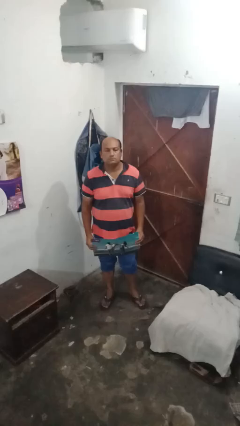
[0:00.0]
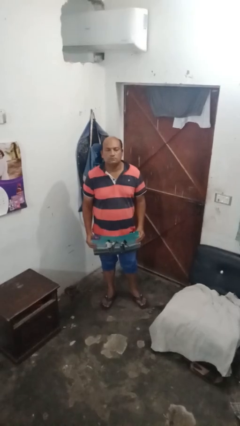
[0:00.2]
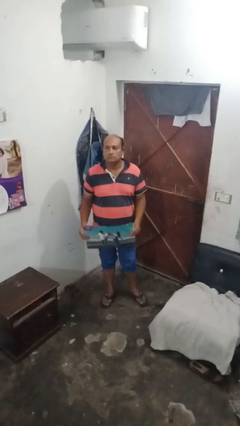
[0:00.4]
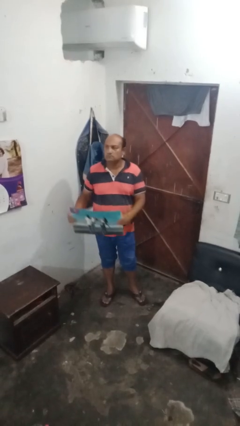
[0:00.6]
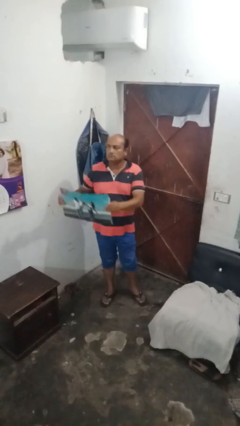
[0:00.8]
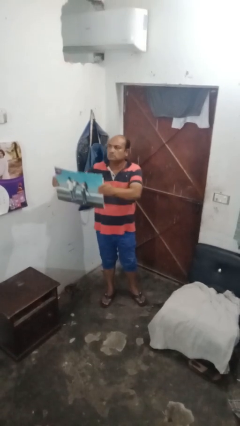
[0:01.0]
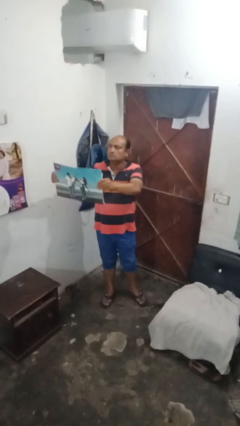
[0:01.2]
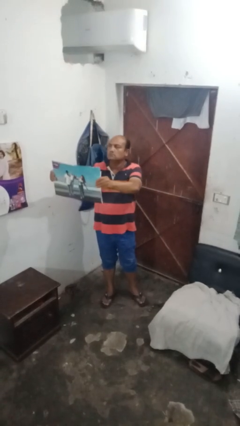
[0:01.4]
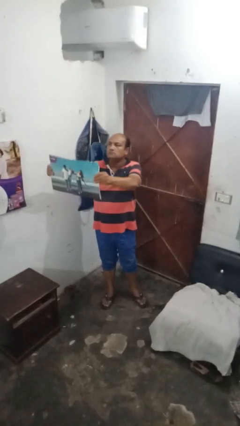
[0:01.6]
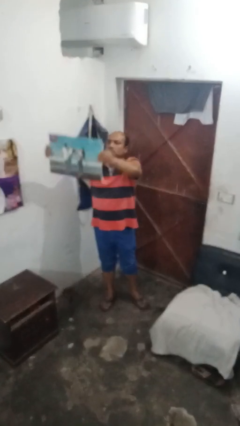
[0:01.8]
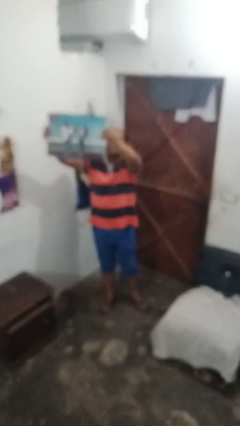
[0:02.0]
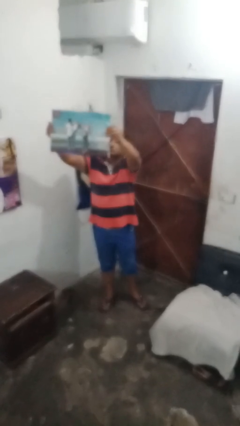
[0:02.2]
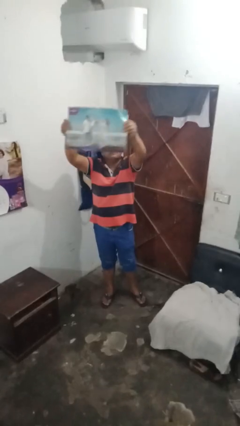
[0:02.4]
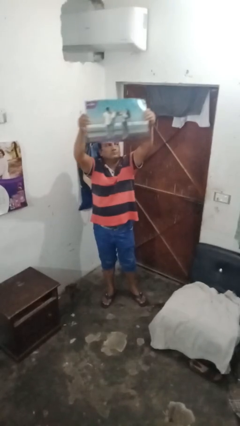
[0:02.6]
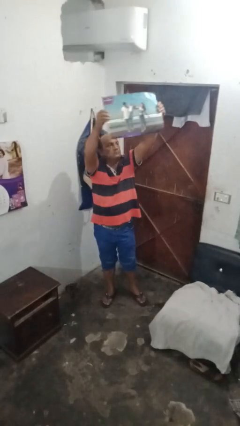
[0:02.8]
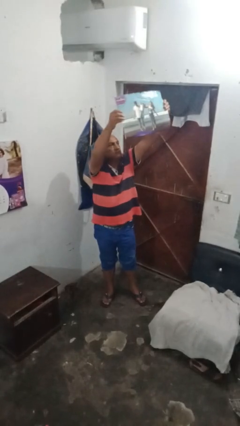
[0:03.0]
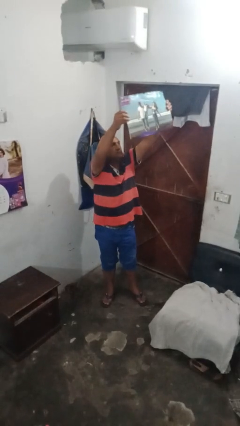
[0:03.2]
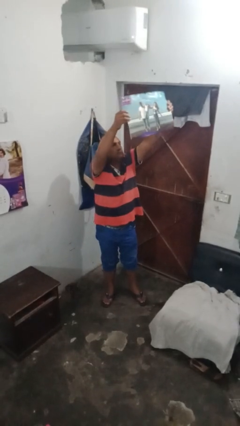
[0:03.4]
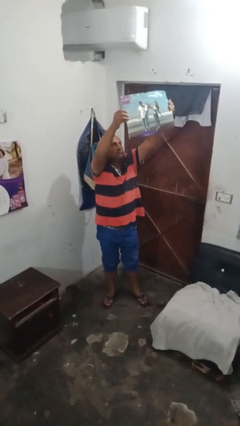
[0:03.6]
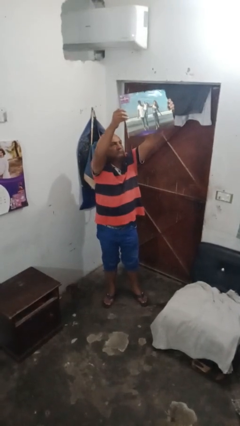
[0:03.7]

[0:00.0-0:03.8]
person holds object above head

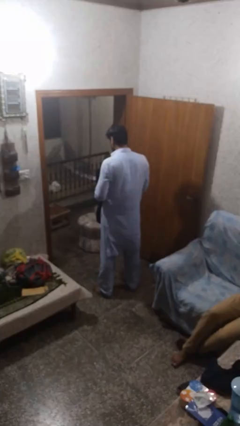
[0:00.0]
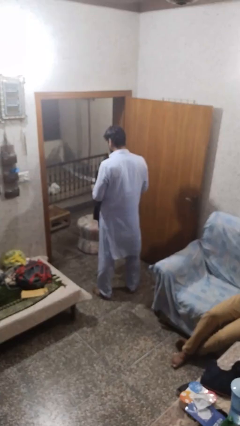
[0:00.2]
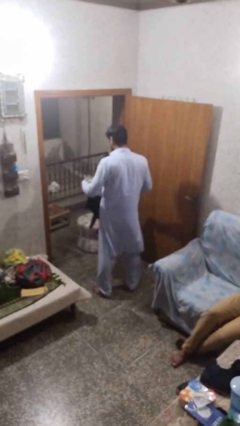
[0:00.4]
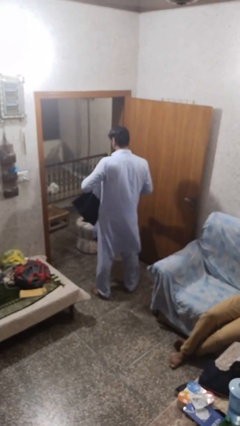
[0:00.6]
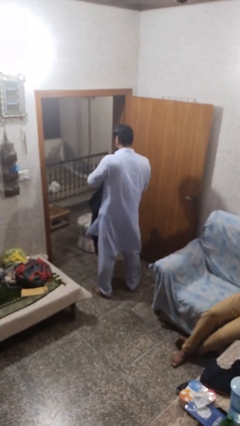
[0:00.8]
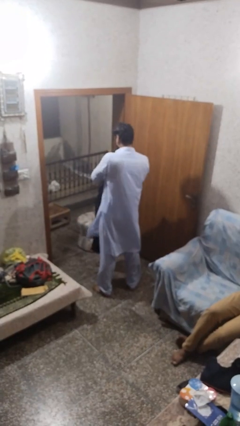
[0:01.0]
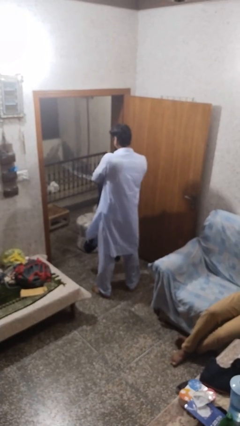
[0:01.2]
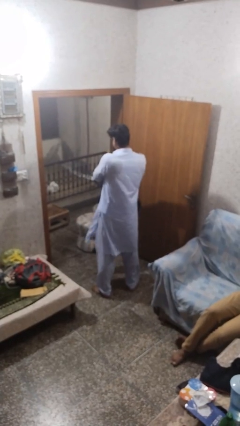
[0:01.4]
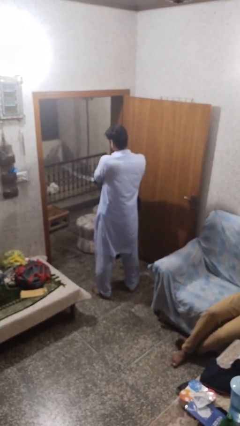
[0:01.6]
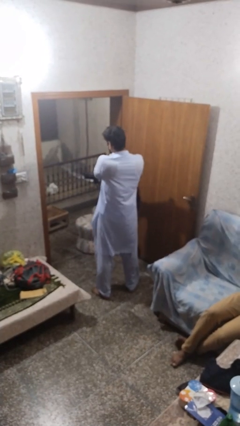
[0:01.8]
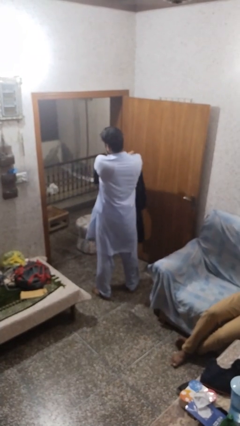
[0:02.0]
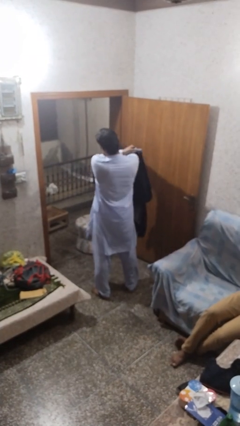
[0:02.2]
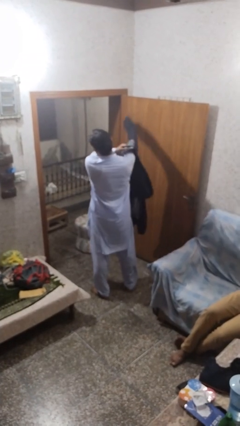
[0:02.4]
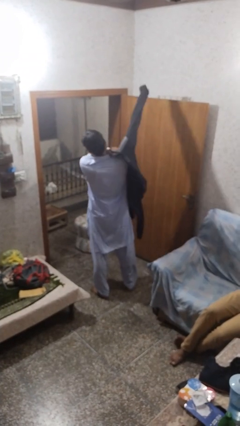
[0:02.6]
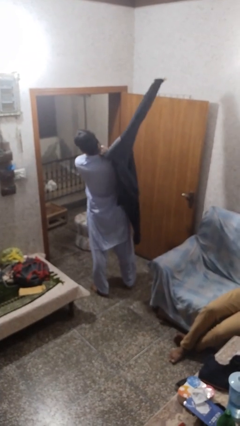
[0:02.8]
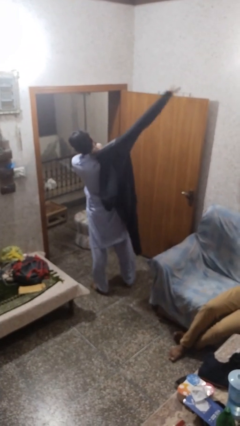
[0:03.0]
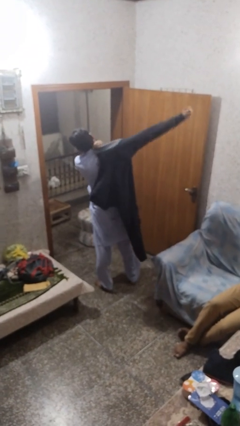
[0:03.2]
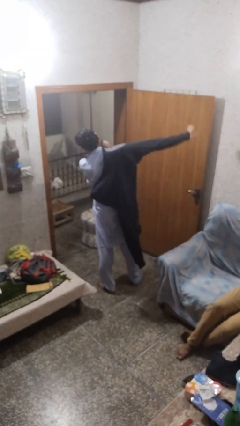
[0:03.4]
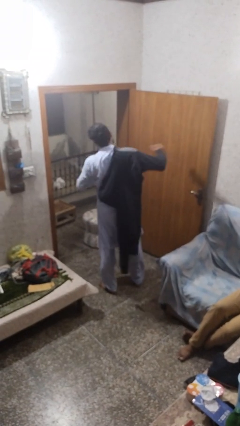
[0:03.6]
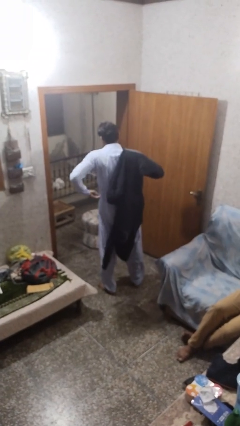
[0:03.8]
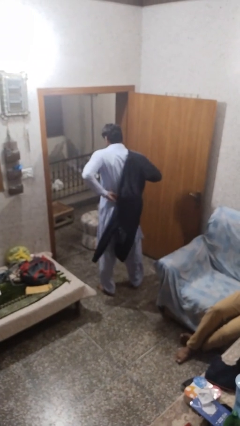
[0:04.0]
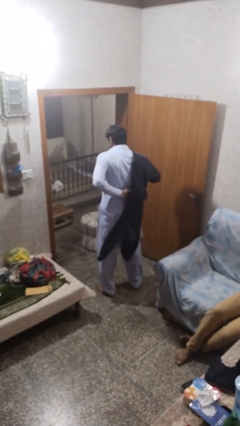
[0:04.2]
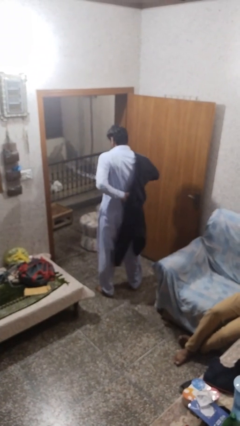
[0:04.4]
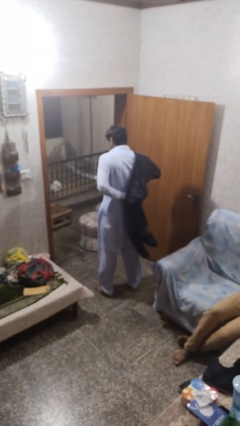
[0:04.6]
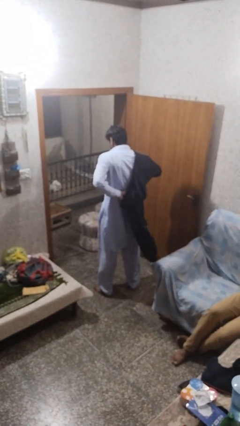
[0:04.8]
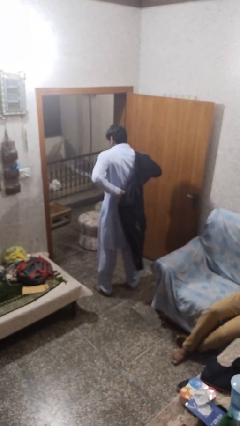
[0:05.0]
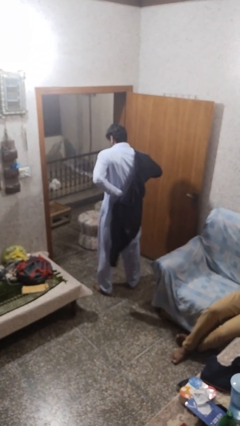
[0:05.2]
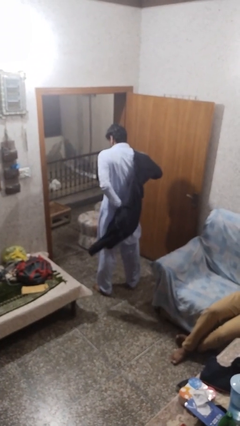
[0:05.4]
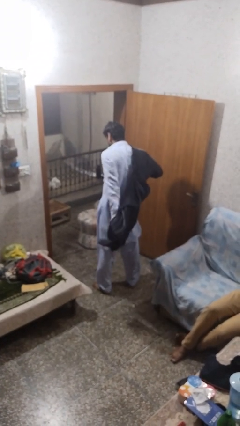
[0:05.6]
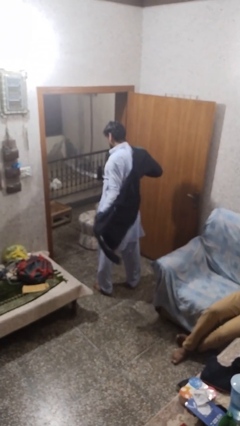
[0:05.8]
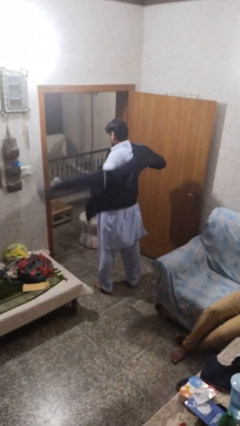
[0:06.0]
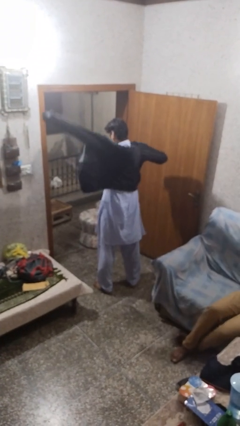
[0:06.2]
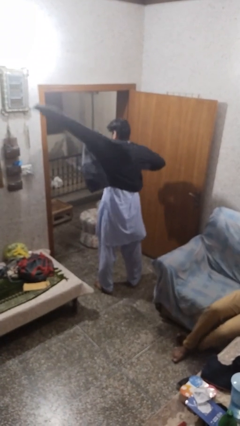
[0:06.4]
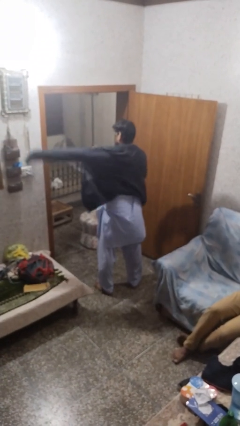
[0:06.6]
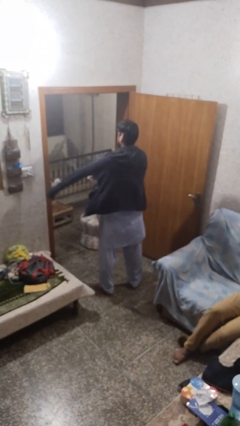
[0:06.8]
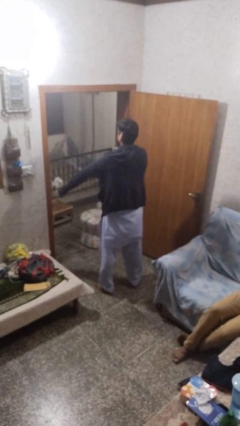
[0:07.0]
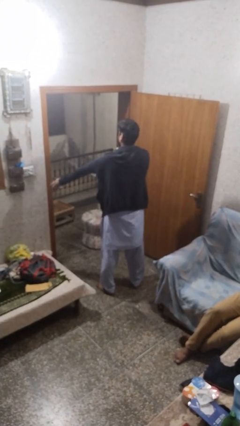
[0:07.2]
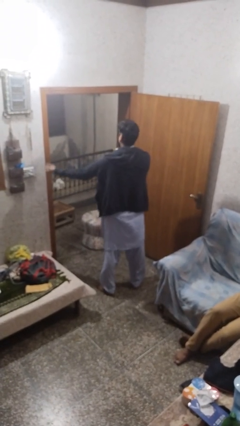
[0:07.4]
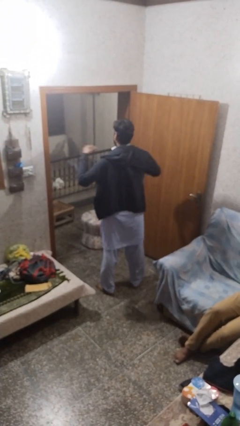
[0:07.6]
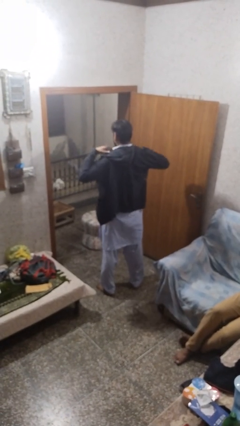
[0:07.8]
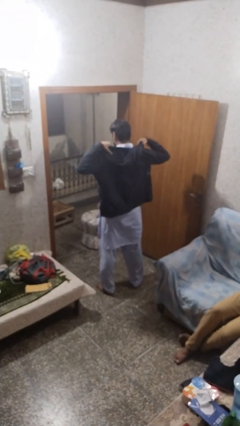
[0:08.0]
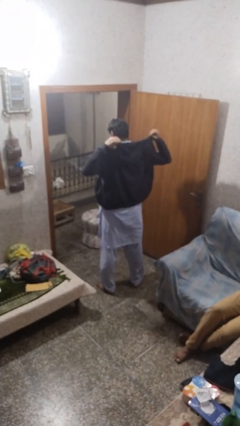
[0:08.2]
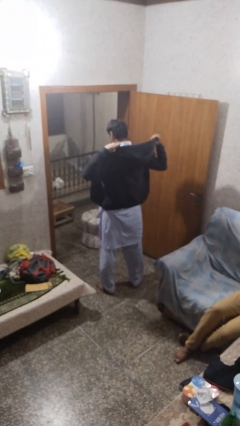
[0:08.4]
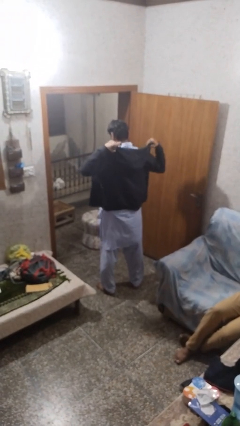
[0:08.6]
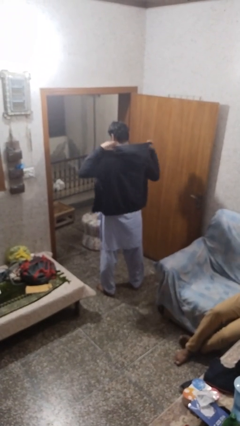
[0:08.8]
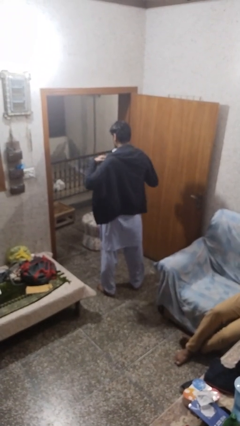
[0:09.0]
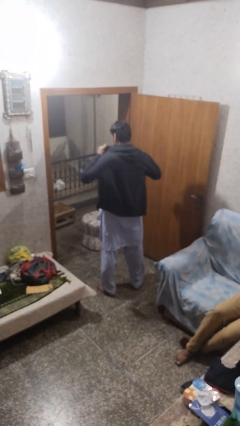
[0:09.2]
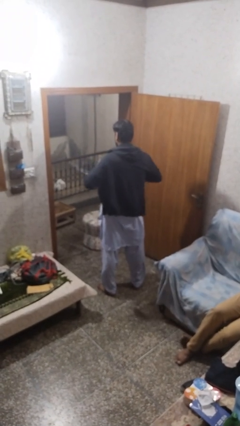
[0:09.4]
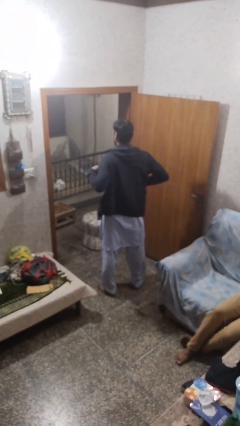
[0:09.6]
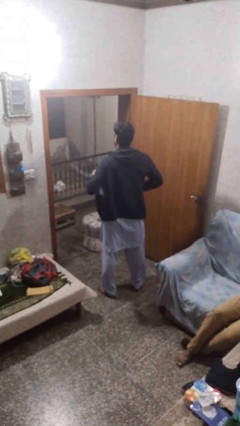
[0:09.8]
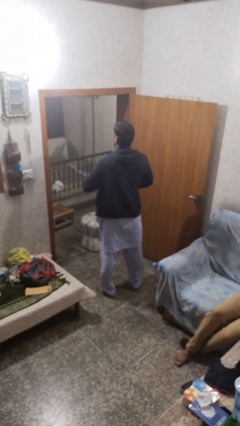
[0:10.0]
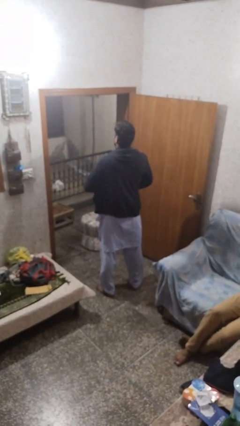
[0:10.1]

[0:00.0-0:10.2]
person puts on jacket

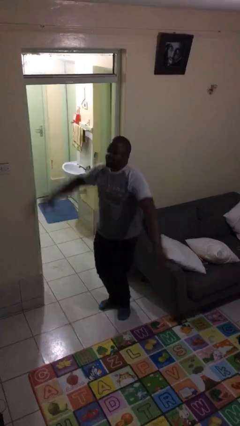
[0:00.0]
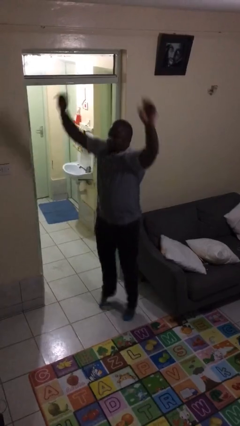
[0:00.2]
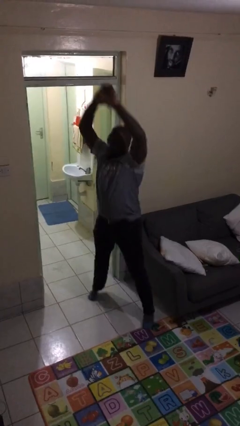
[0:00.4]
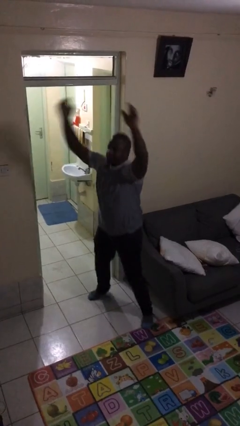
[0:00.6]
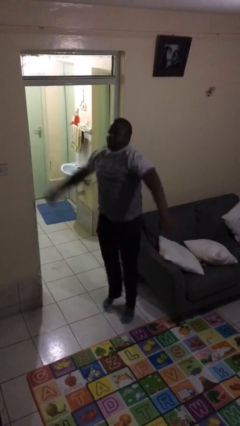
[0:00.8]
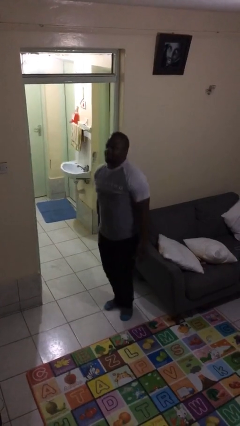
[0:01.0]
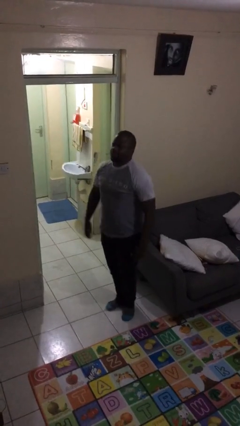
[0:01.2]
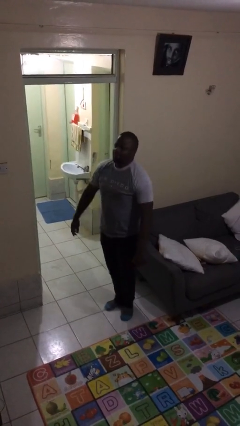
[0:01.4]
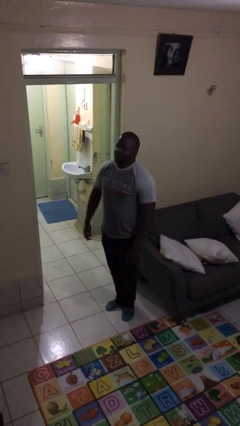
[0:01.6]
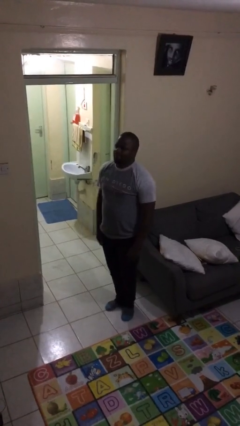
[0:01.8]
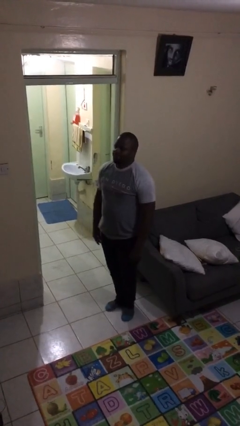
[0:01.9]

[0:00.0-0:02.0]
person exercises with jumping jacks

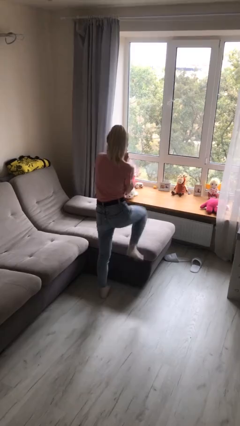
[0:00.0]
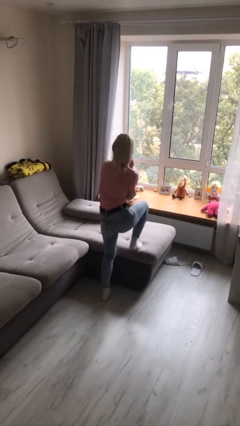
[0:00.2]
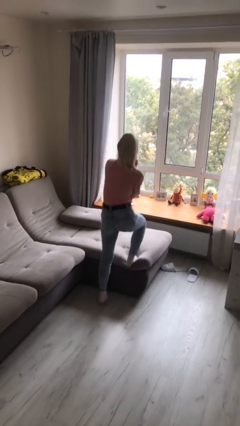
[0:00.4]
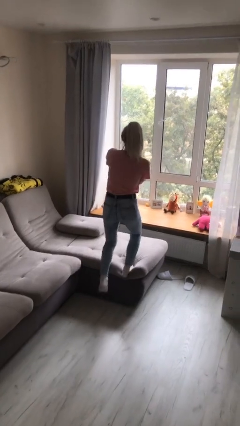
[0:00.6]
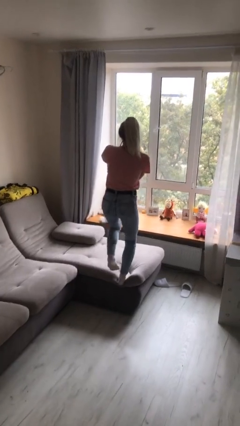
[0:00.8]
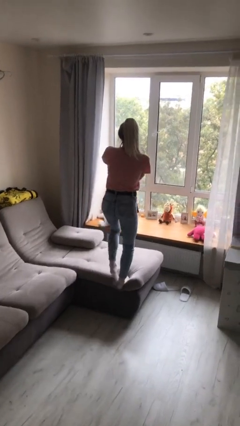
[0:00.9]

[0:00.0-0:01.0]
person climbs on couch

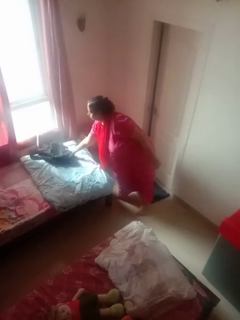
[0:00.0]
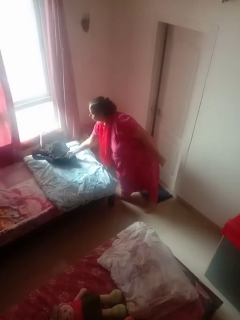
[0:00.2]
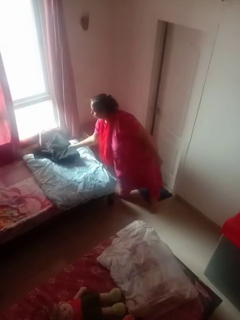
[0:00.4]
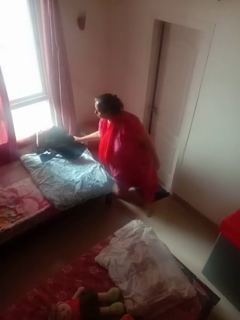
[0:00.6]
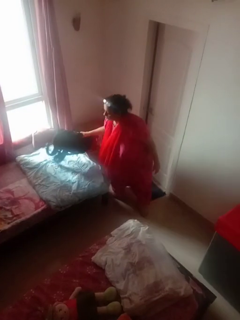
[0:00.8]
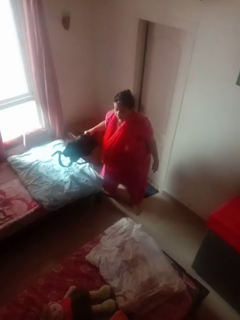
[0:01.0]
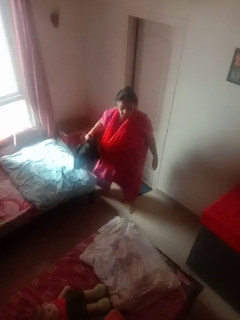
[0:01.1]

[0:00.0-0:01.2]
person picks up object from bed
